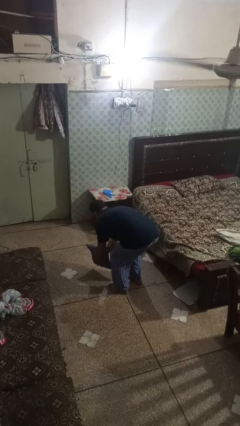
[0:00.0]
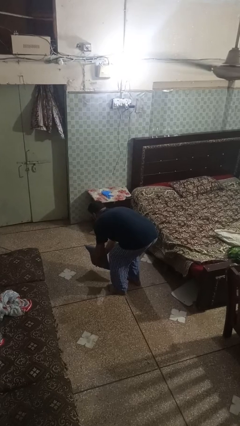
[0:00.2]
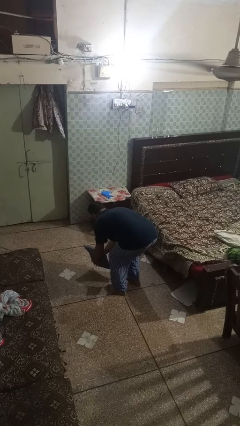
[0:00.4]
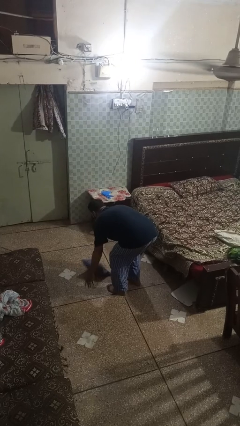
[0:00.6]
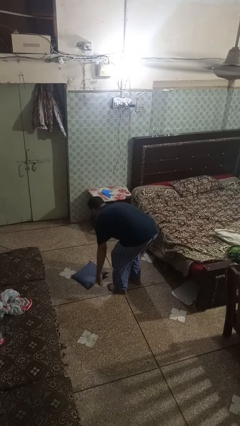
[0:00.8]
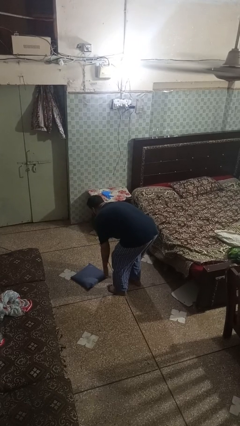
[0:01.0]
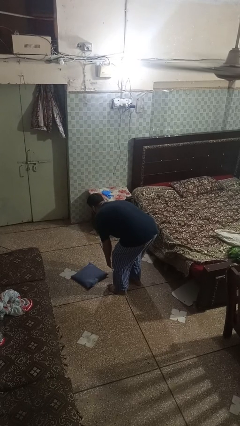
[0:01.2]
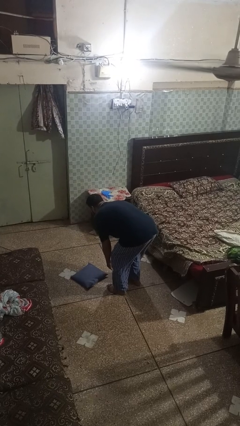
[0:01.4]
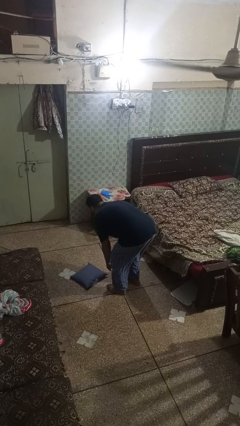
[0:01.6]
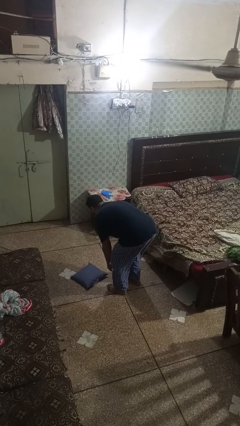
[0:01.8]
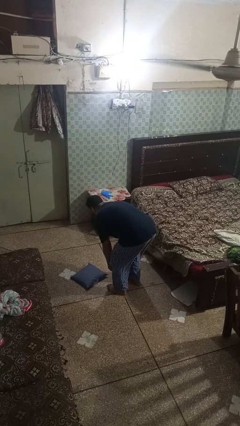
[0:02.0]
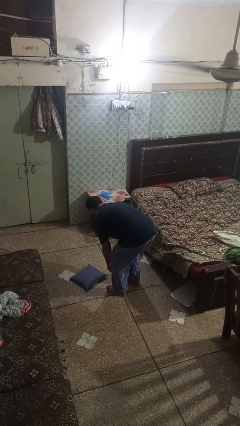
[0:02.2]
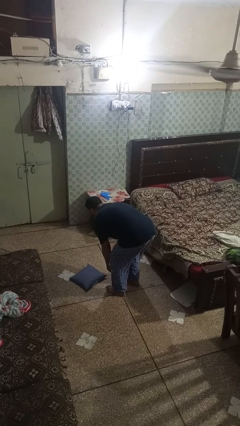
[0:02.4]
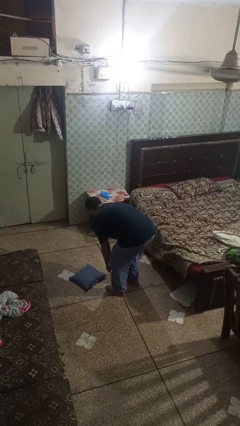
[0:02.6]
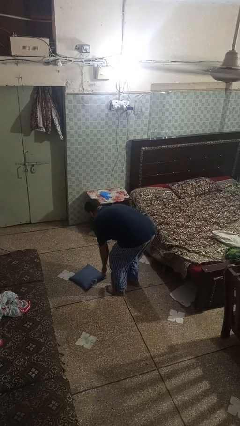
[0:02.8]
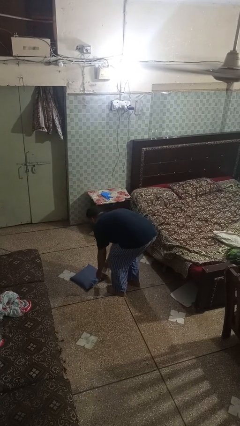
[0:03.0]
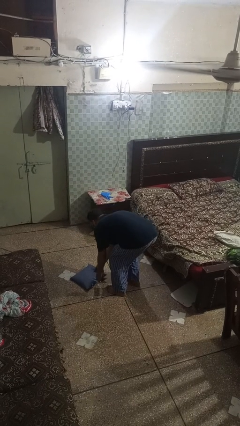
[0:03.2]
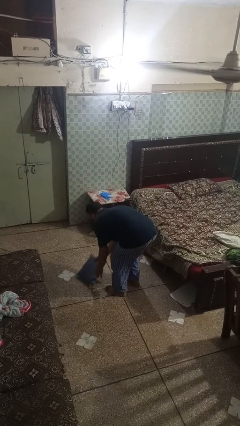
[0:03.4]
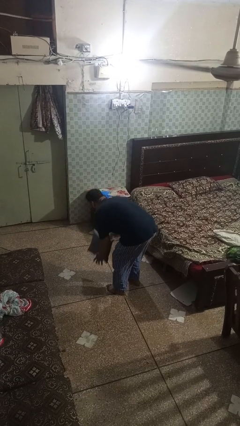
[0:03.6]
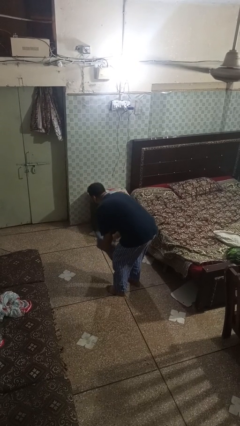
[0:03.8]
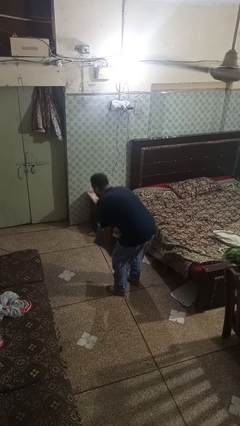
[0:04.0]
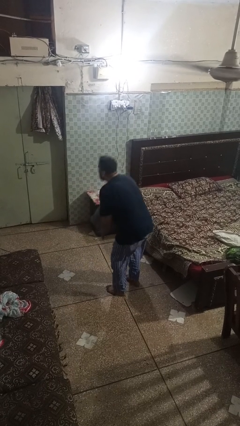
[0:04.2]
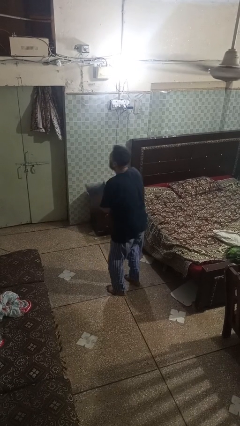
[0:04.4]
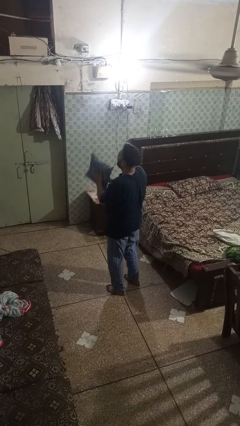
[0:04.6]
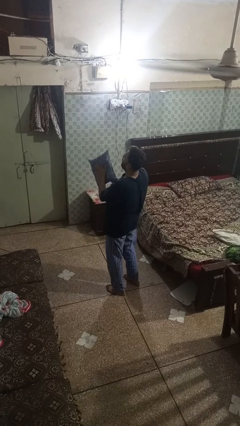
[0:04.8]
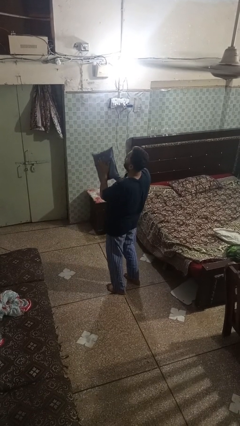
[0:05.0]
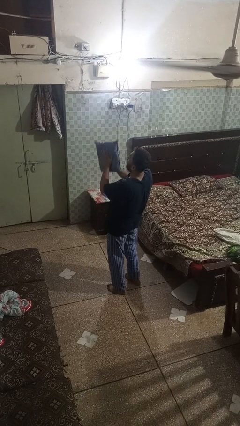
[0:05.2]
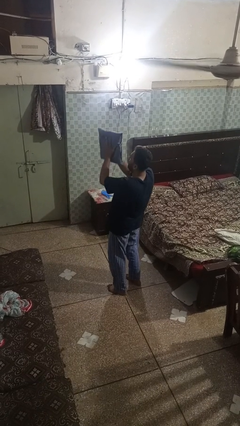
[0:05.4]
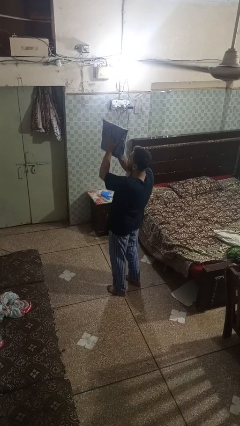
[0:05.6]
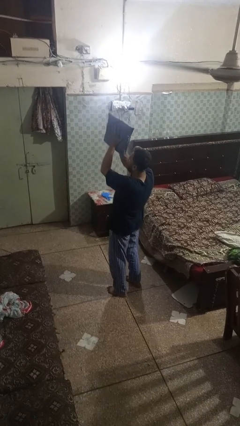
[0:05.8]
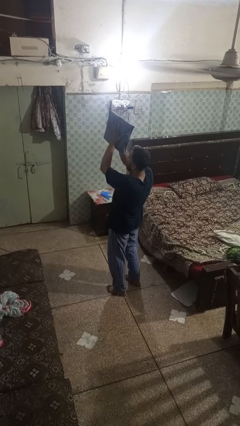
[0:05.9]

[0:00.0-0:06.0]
person picks up object from floor

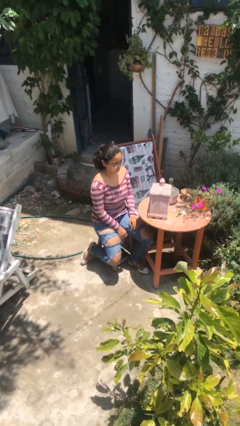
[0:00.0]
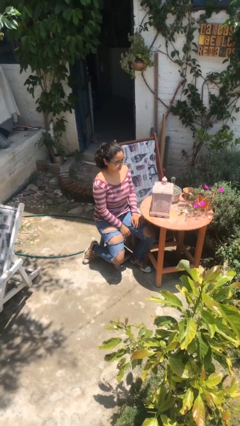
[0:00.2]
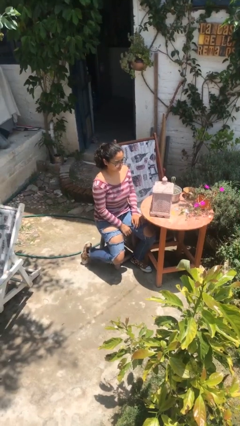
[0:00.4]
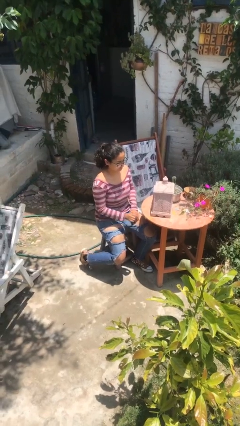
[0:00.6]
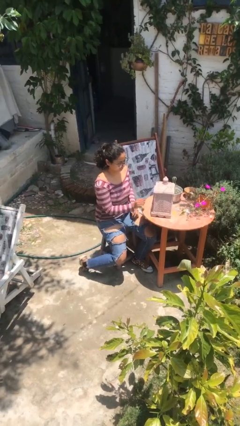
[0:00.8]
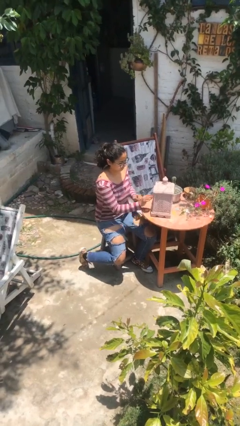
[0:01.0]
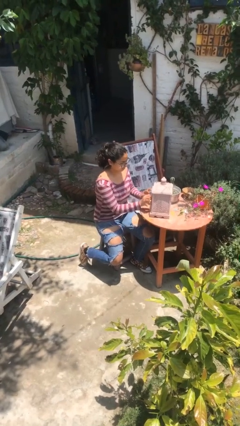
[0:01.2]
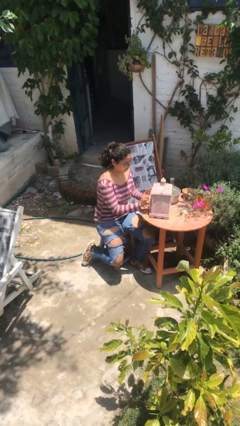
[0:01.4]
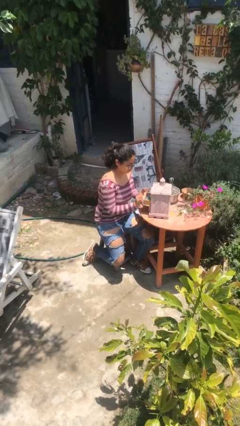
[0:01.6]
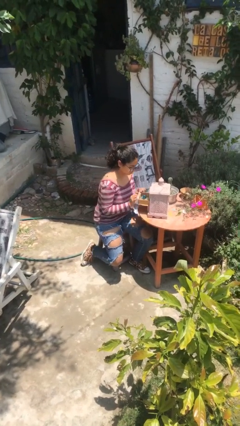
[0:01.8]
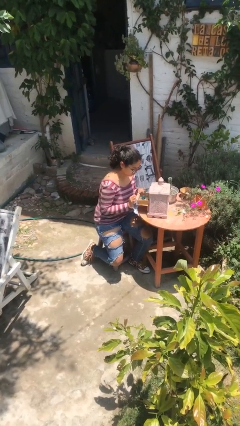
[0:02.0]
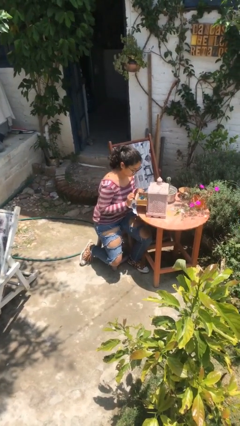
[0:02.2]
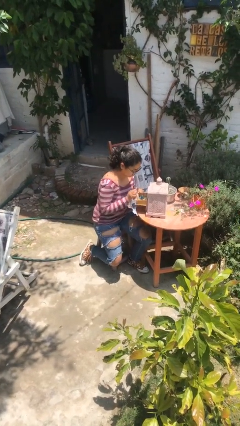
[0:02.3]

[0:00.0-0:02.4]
person opens jewelry box

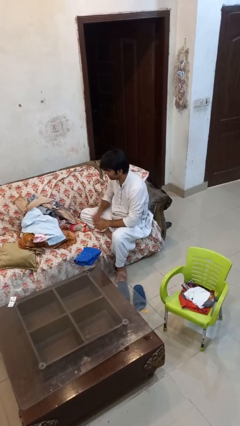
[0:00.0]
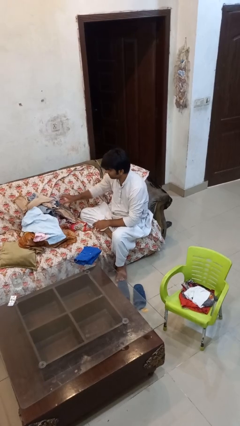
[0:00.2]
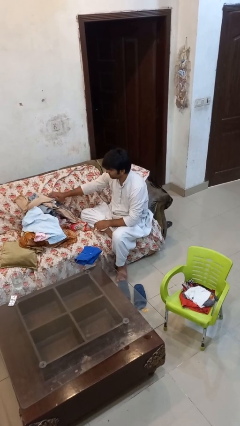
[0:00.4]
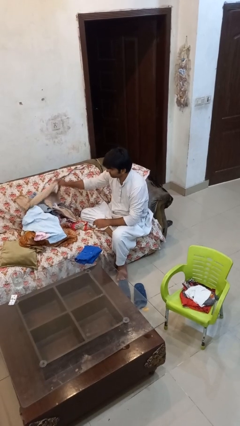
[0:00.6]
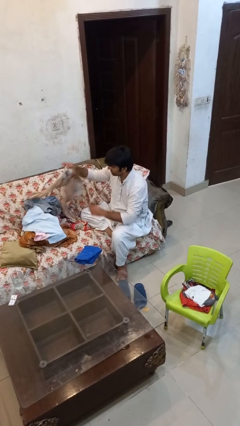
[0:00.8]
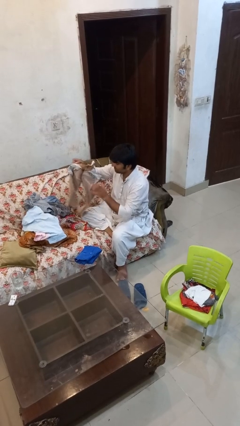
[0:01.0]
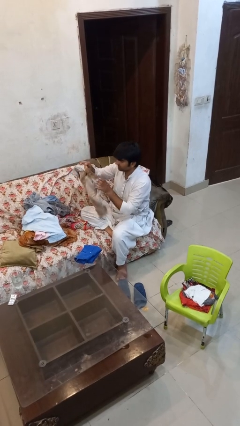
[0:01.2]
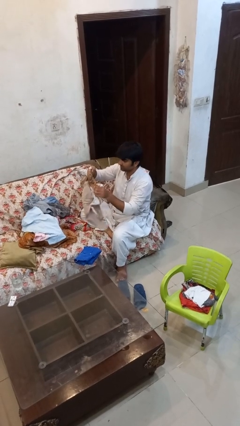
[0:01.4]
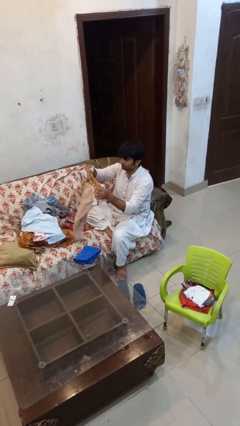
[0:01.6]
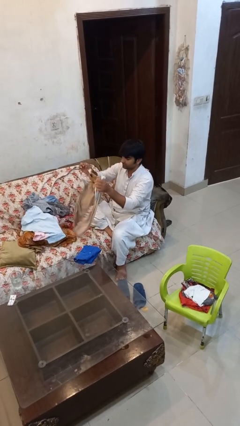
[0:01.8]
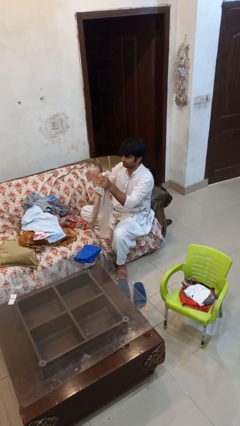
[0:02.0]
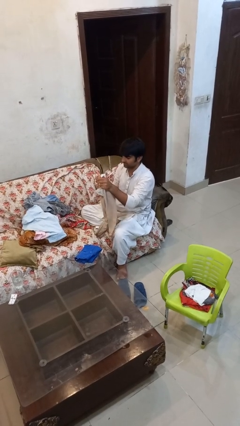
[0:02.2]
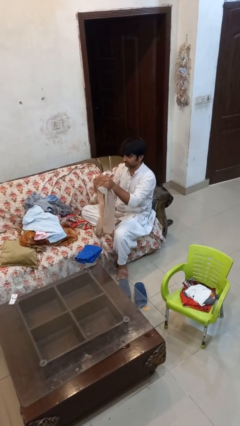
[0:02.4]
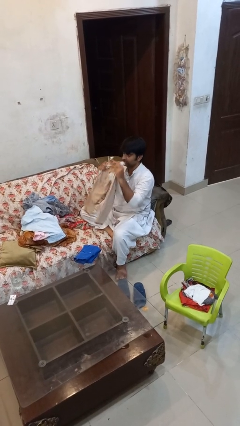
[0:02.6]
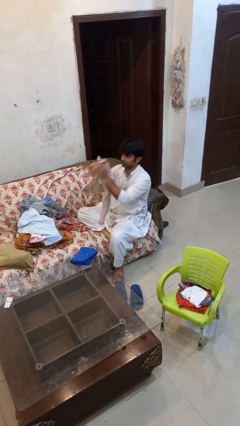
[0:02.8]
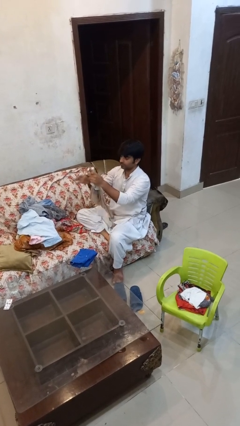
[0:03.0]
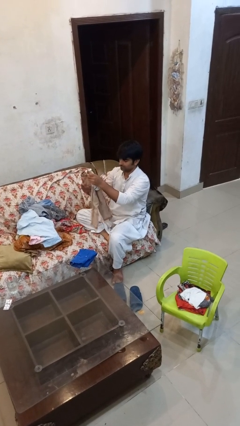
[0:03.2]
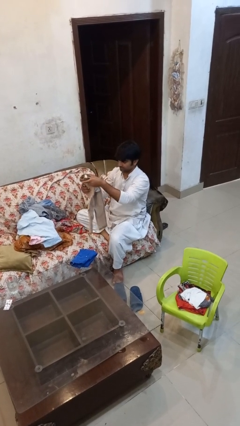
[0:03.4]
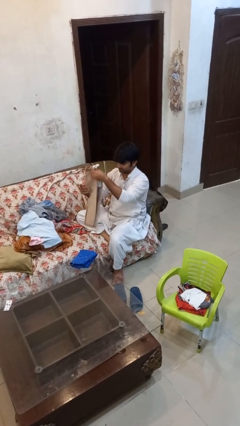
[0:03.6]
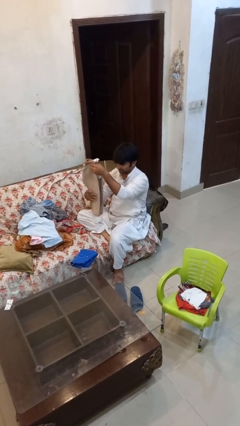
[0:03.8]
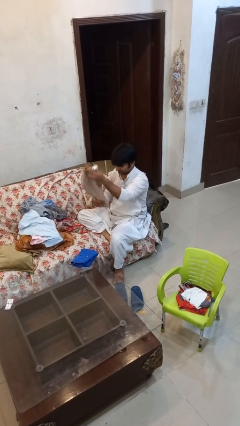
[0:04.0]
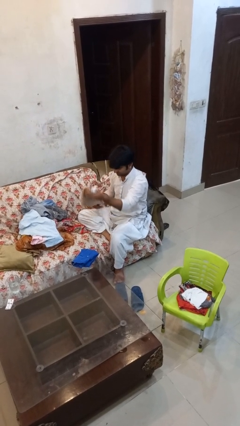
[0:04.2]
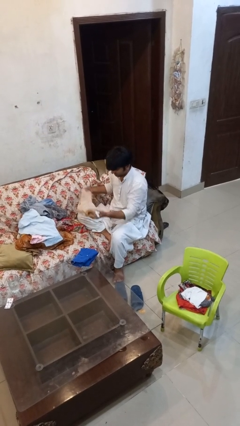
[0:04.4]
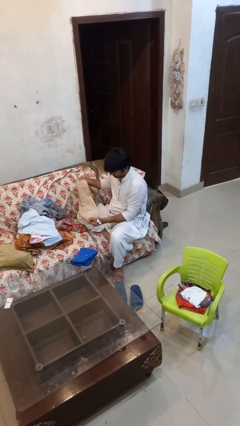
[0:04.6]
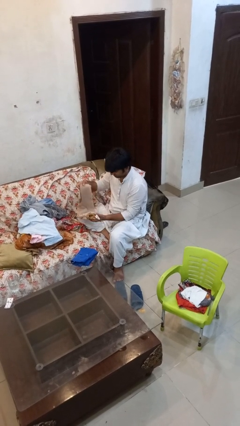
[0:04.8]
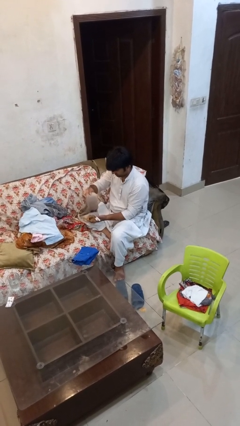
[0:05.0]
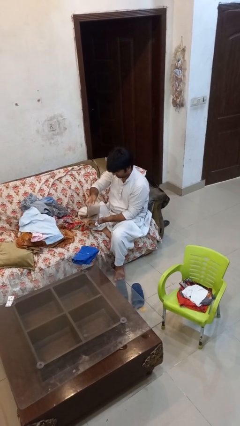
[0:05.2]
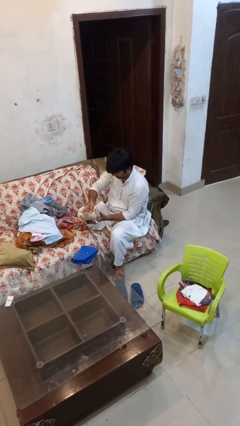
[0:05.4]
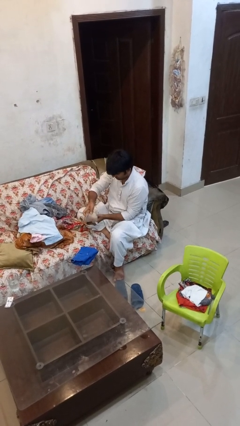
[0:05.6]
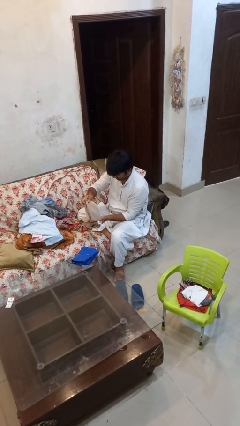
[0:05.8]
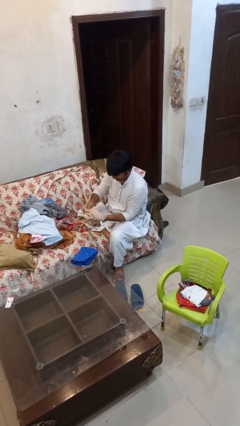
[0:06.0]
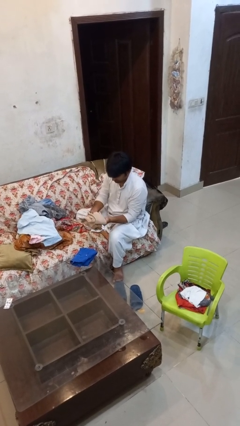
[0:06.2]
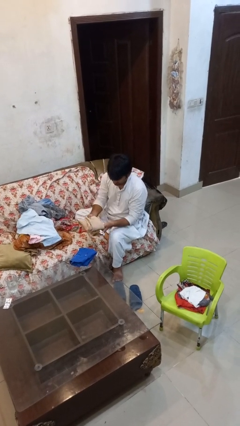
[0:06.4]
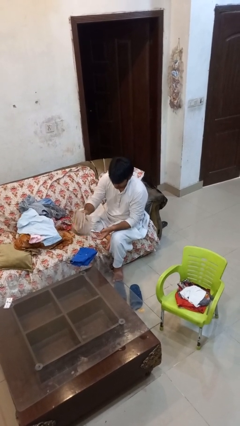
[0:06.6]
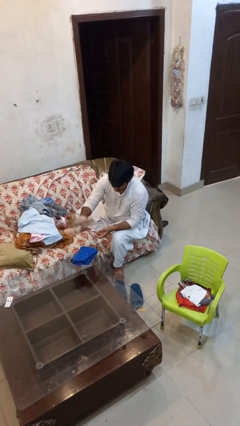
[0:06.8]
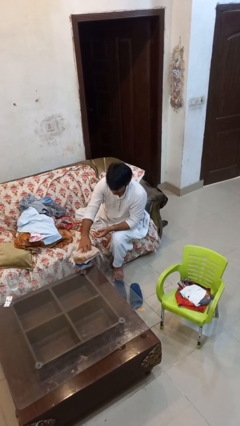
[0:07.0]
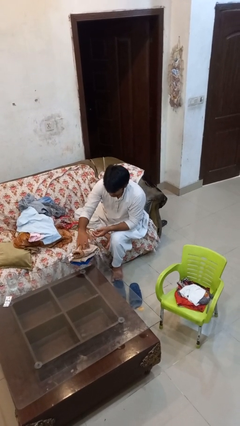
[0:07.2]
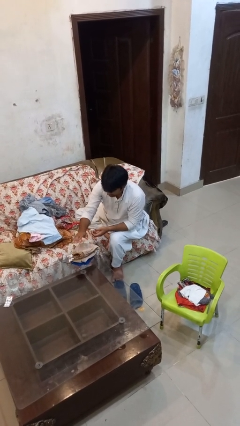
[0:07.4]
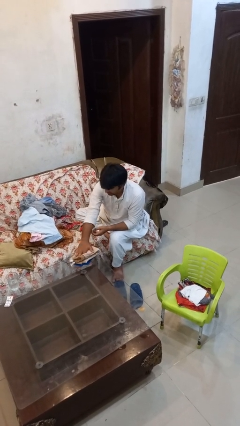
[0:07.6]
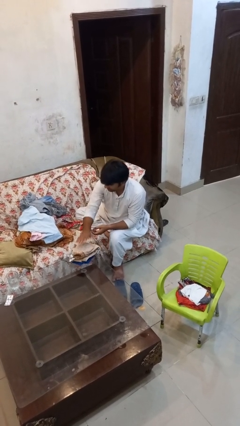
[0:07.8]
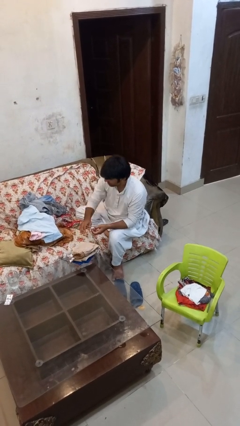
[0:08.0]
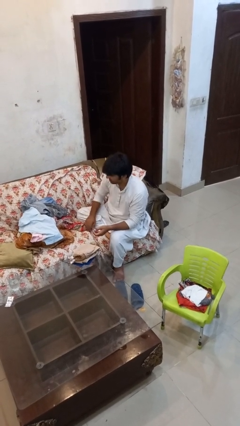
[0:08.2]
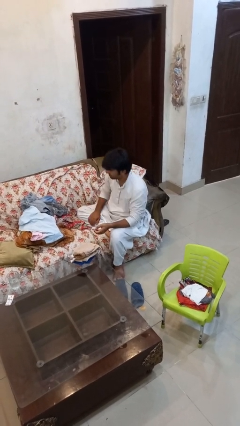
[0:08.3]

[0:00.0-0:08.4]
person folds pants

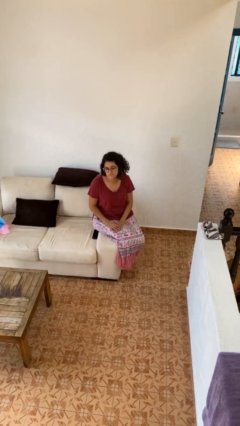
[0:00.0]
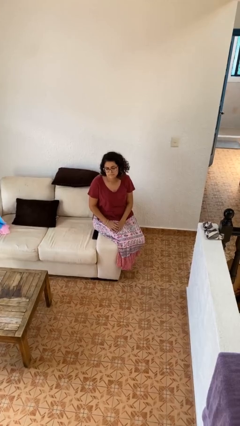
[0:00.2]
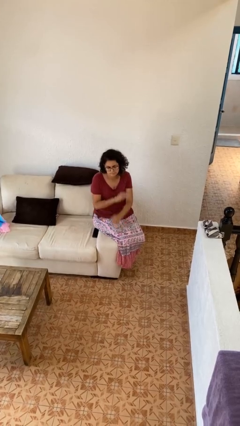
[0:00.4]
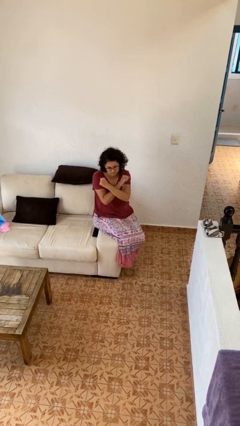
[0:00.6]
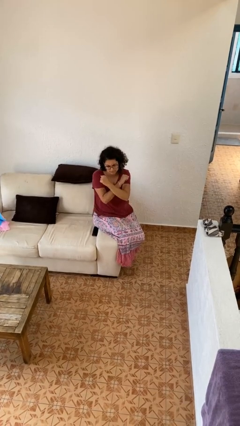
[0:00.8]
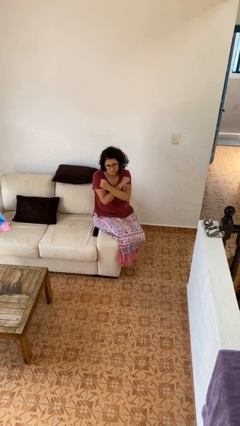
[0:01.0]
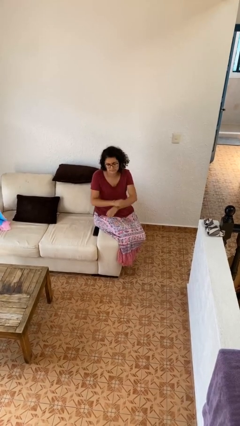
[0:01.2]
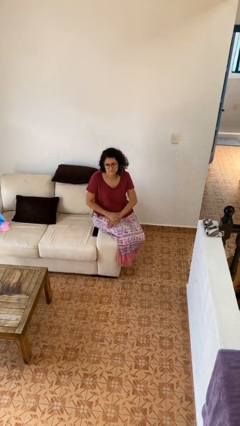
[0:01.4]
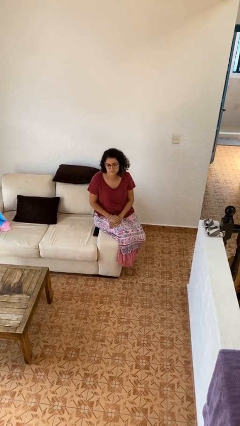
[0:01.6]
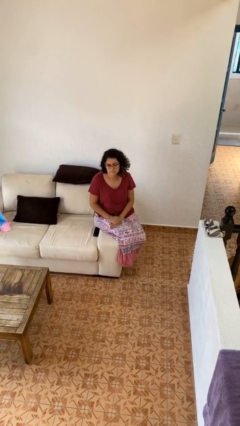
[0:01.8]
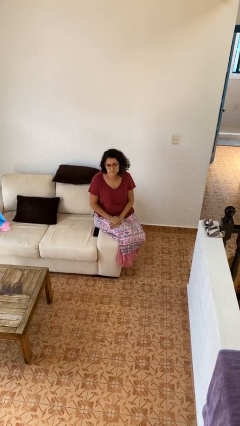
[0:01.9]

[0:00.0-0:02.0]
person gestures arms x
